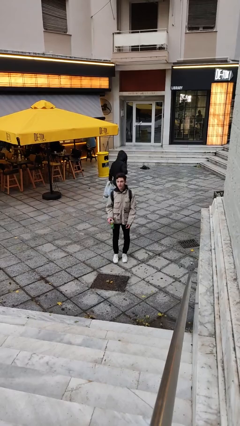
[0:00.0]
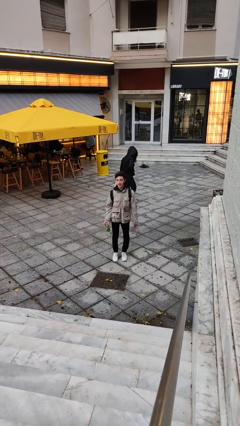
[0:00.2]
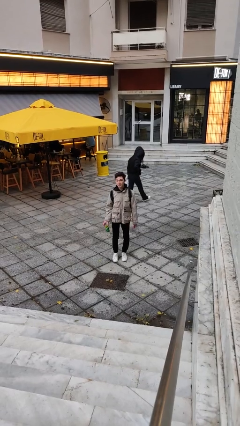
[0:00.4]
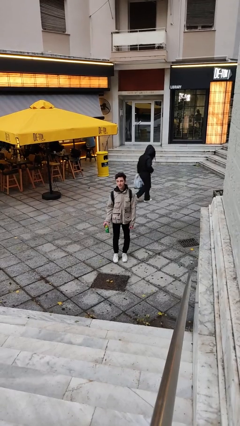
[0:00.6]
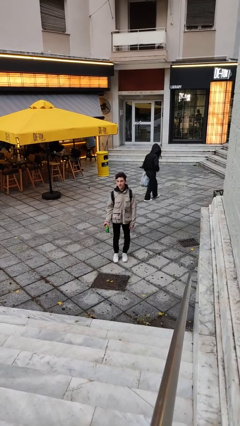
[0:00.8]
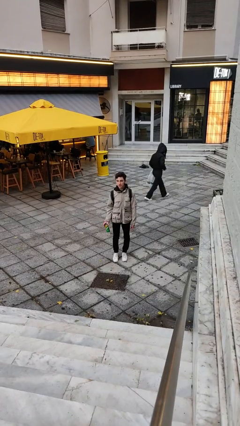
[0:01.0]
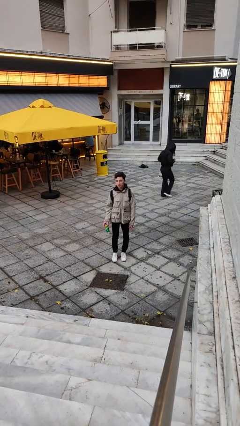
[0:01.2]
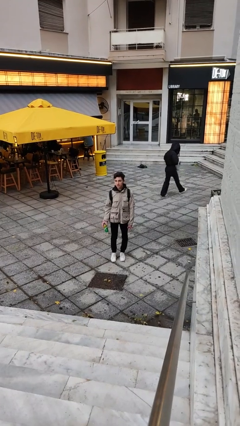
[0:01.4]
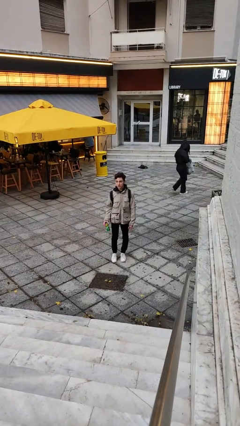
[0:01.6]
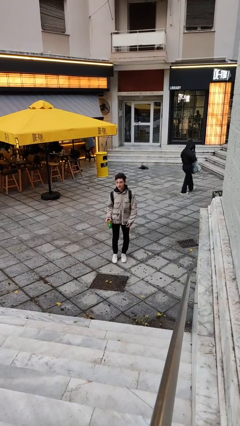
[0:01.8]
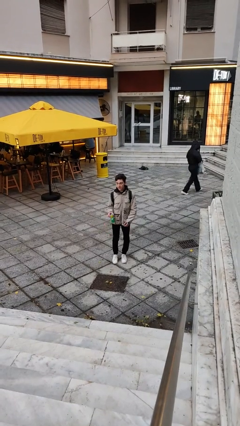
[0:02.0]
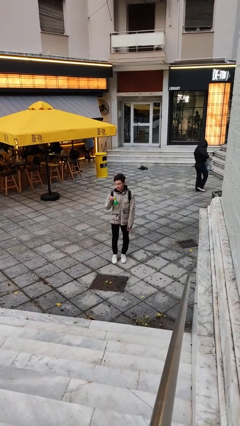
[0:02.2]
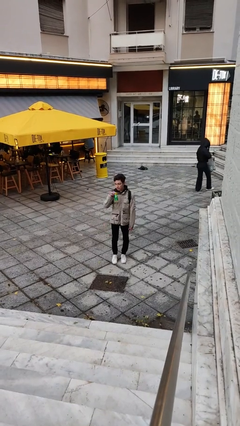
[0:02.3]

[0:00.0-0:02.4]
person opens beverage can

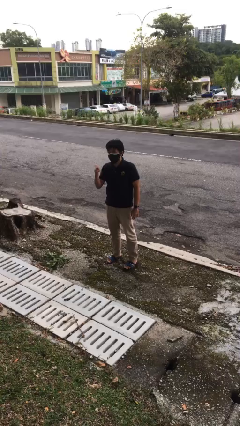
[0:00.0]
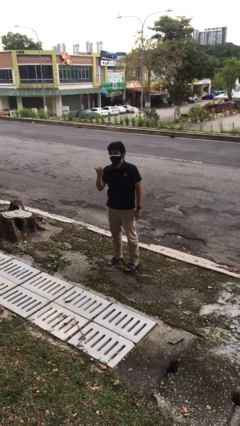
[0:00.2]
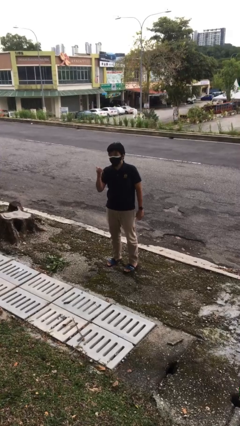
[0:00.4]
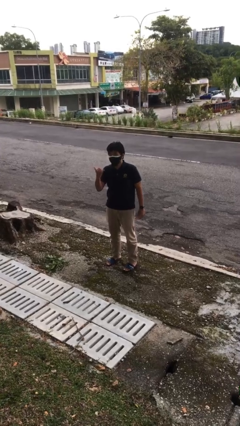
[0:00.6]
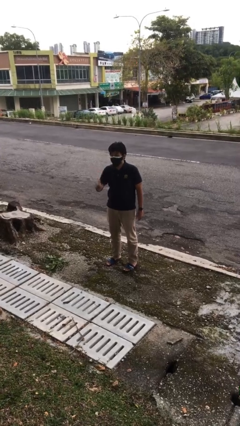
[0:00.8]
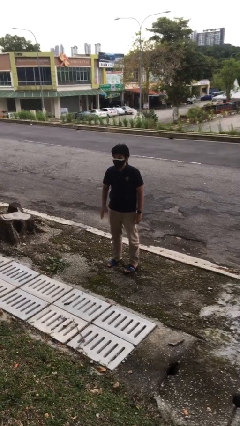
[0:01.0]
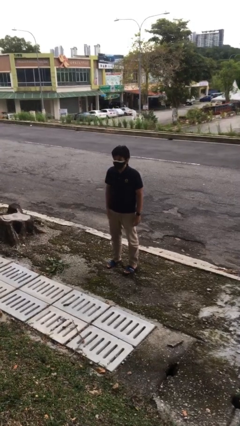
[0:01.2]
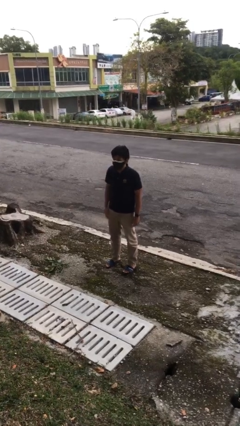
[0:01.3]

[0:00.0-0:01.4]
person gestures hang loose

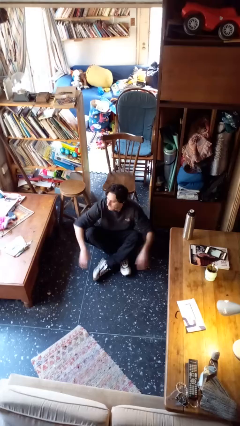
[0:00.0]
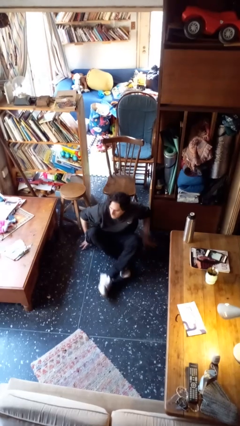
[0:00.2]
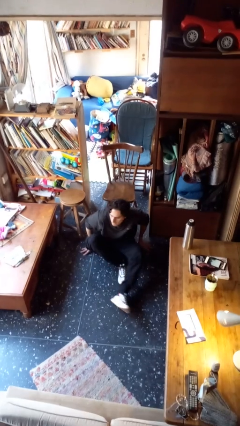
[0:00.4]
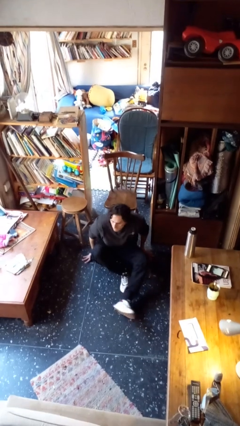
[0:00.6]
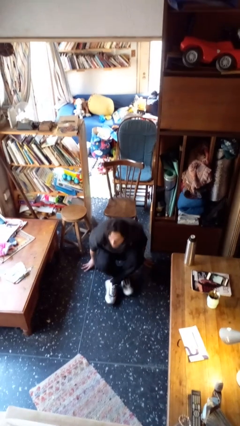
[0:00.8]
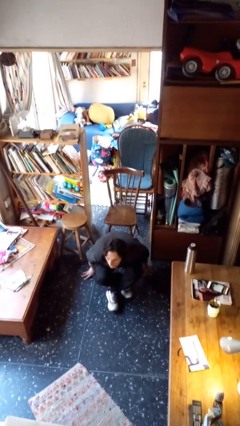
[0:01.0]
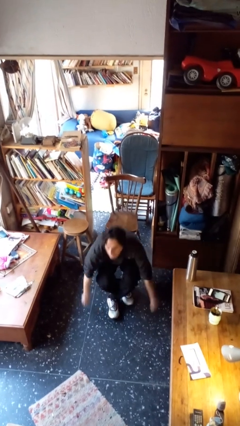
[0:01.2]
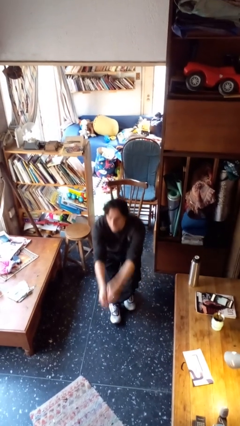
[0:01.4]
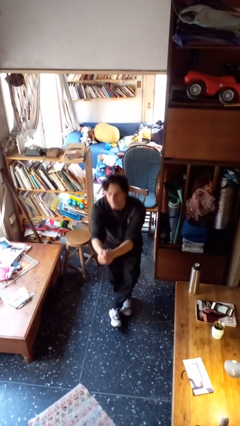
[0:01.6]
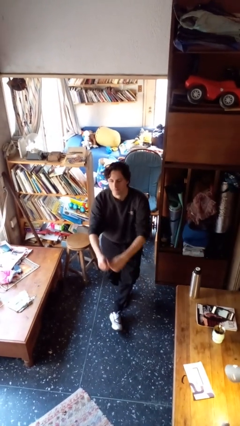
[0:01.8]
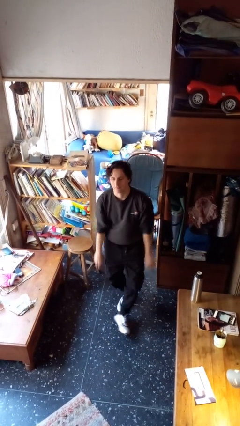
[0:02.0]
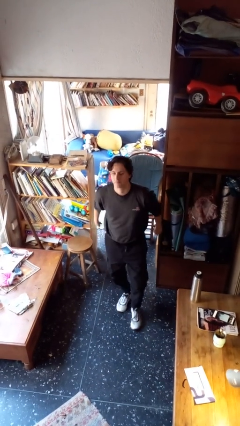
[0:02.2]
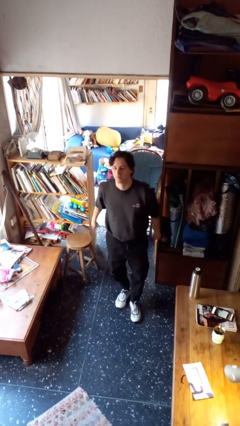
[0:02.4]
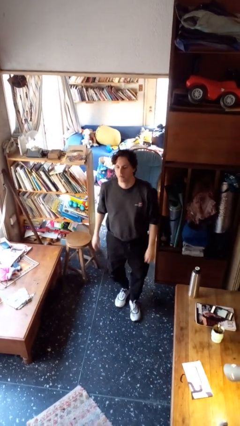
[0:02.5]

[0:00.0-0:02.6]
person stands up from floor

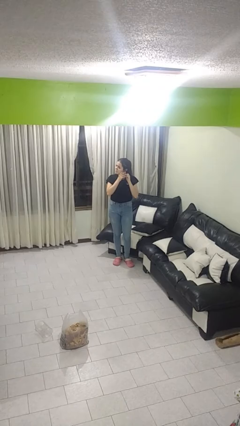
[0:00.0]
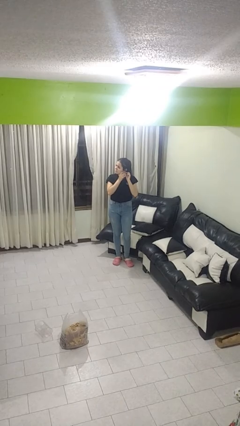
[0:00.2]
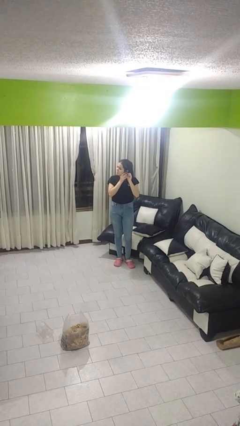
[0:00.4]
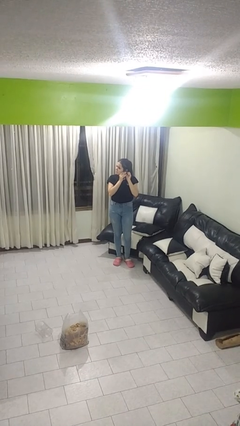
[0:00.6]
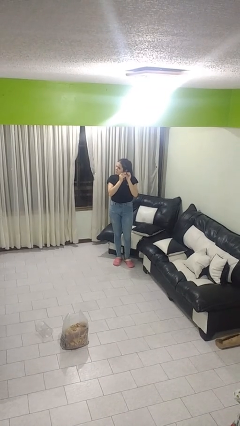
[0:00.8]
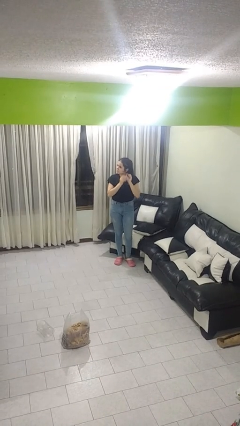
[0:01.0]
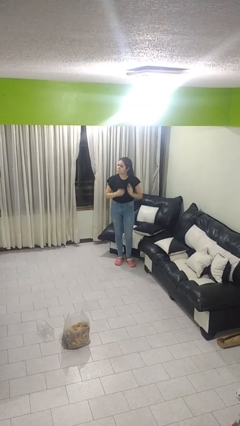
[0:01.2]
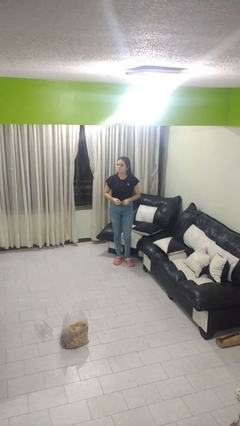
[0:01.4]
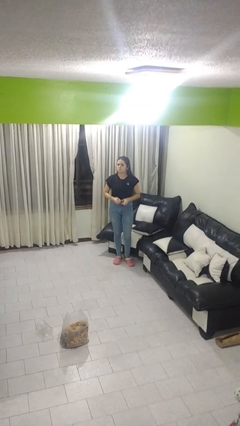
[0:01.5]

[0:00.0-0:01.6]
person takes off earrings

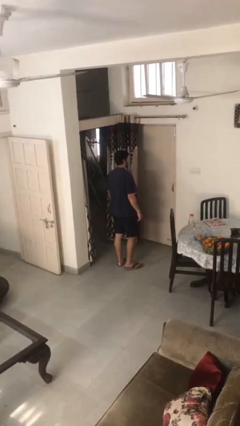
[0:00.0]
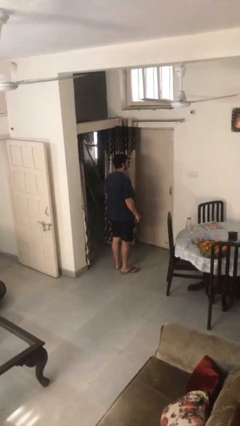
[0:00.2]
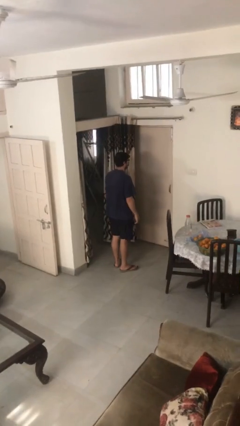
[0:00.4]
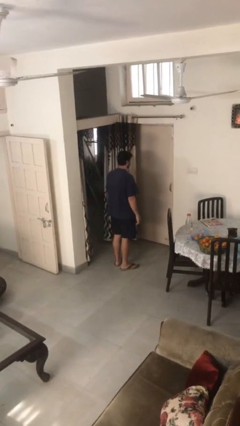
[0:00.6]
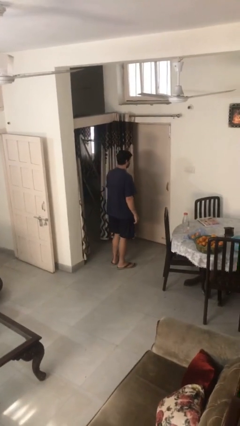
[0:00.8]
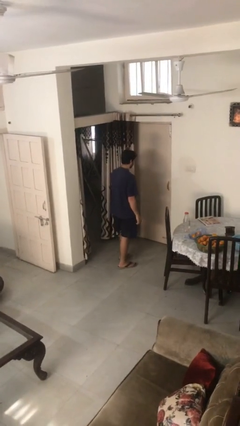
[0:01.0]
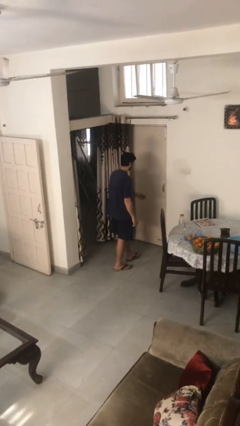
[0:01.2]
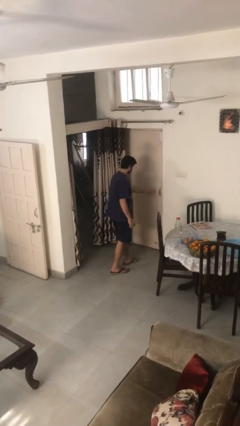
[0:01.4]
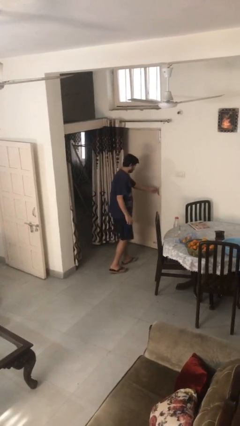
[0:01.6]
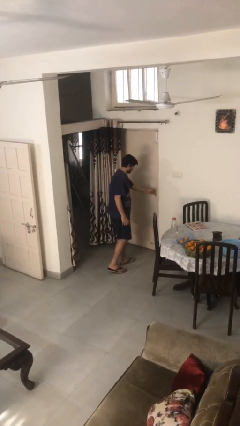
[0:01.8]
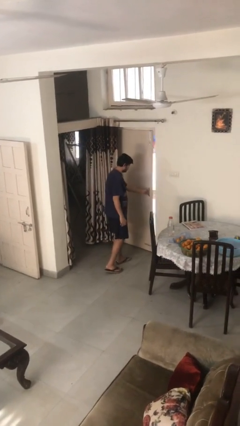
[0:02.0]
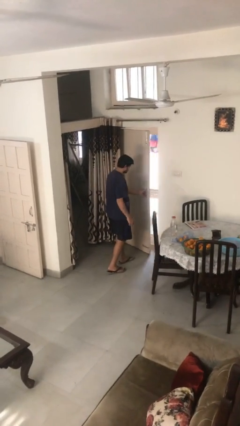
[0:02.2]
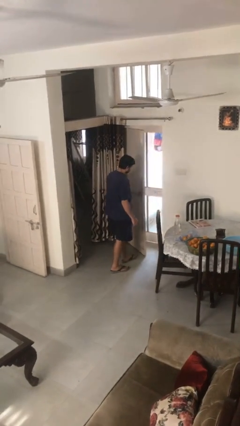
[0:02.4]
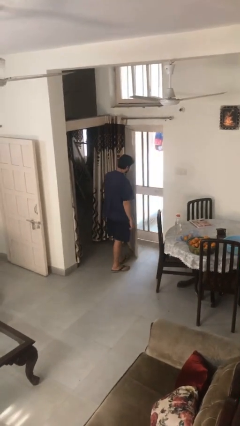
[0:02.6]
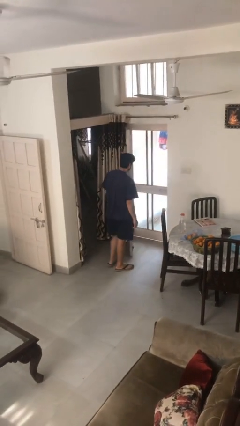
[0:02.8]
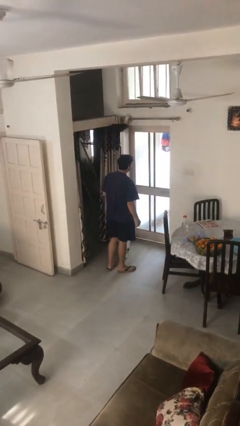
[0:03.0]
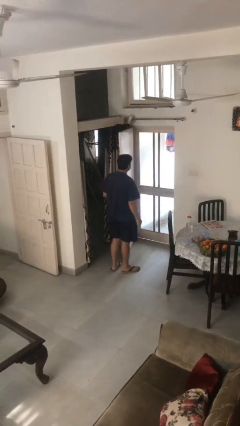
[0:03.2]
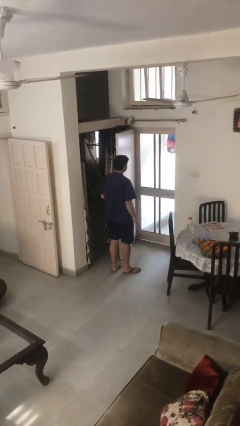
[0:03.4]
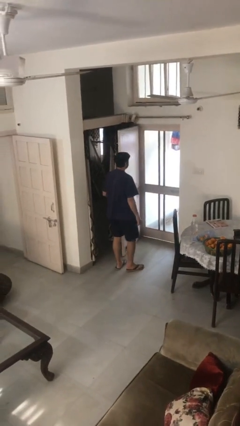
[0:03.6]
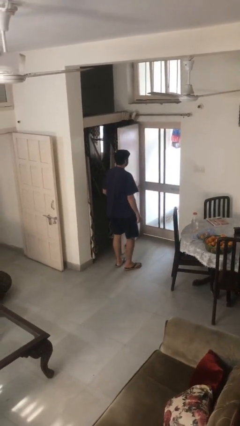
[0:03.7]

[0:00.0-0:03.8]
person opens facility door

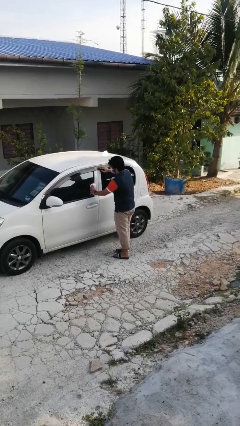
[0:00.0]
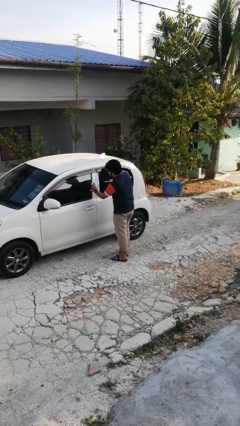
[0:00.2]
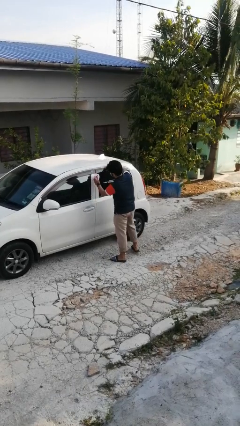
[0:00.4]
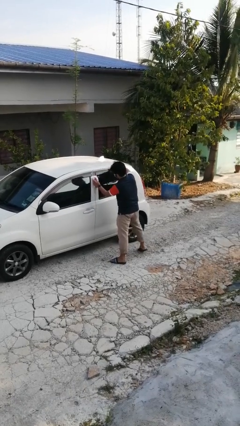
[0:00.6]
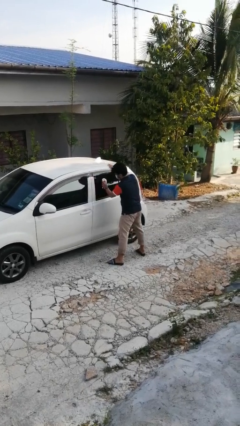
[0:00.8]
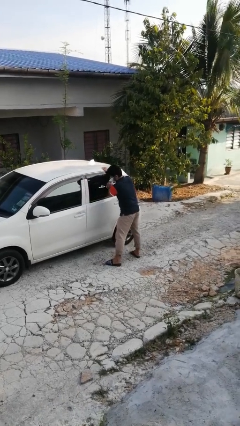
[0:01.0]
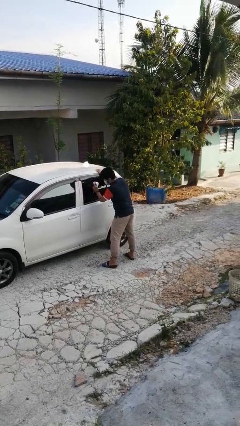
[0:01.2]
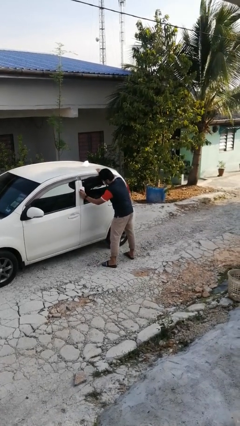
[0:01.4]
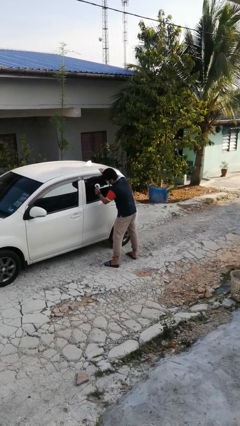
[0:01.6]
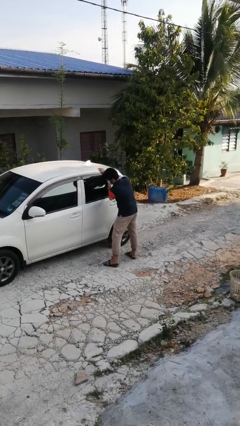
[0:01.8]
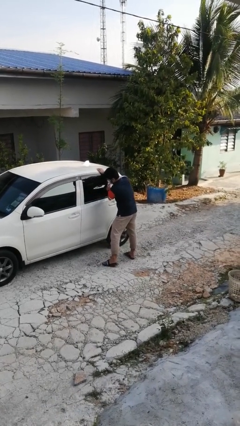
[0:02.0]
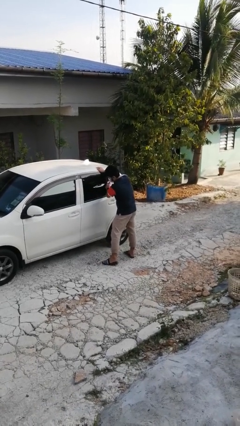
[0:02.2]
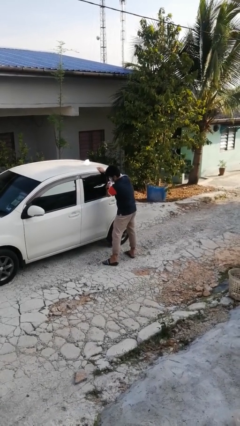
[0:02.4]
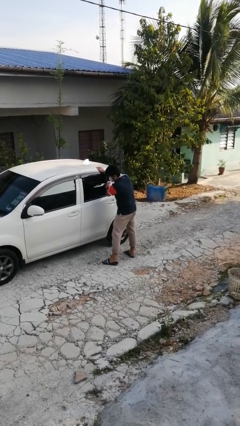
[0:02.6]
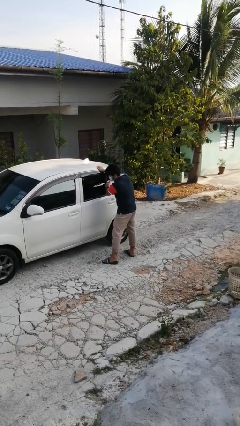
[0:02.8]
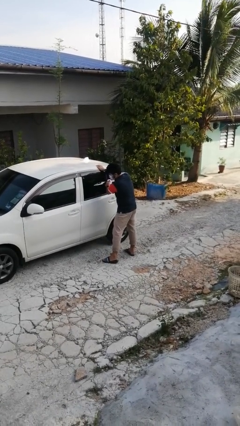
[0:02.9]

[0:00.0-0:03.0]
person polishes car with rag

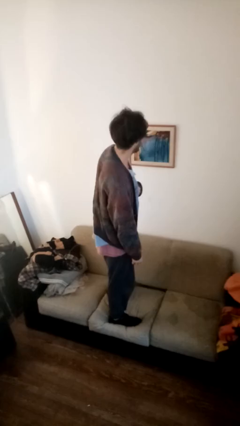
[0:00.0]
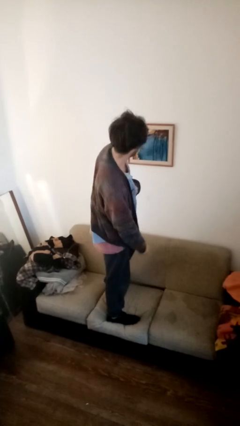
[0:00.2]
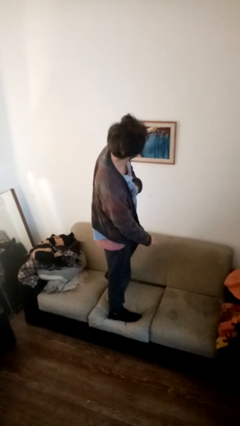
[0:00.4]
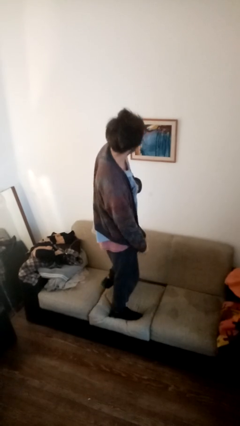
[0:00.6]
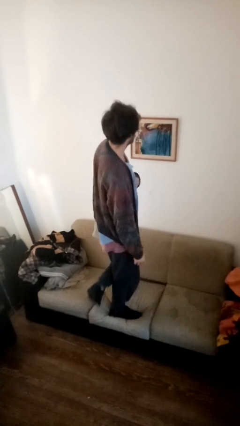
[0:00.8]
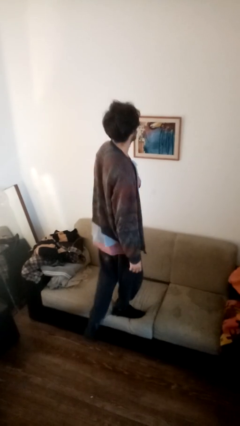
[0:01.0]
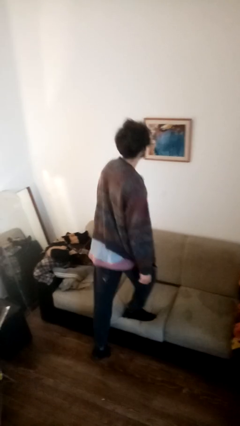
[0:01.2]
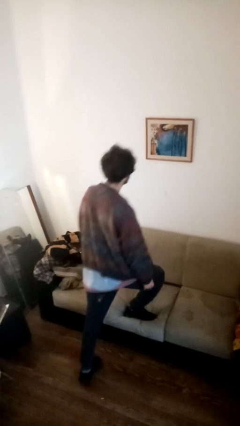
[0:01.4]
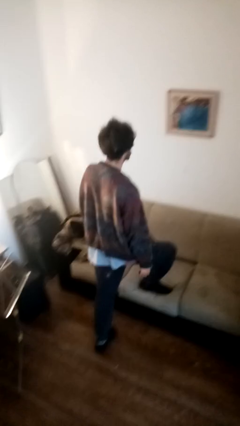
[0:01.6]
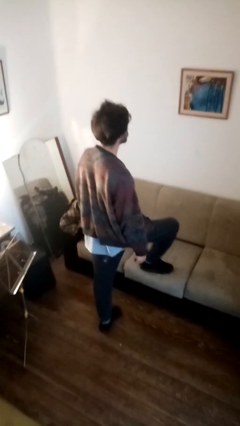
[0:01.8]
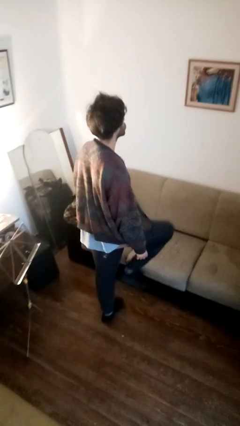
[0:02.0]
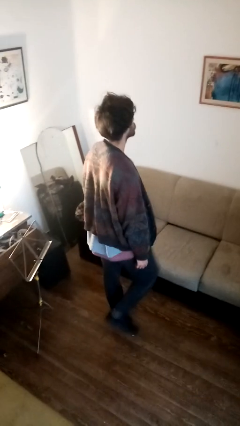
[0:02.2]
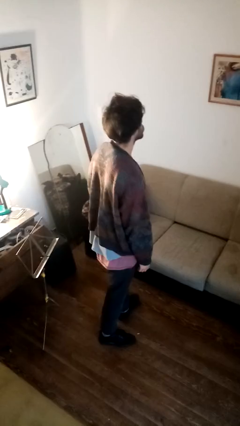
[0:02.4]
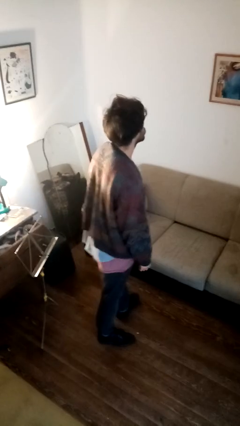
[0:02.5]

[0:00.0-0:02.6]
person climbs off couch
